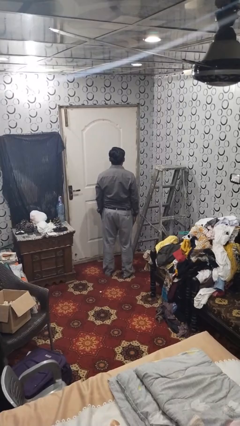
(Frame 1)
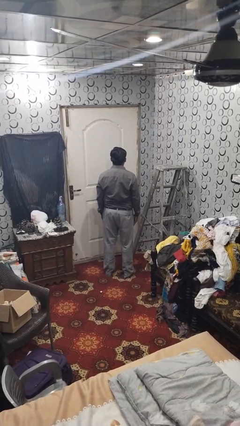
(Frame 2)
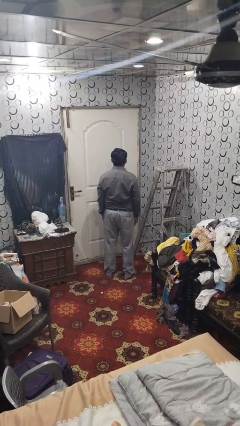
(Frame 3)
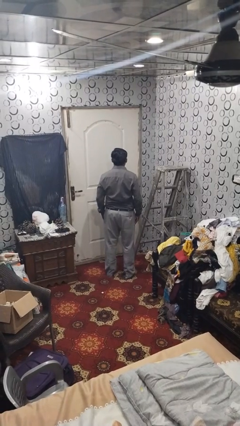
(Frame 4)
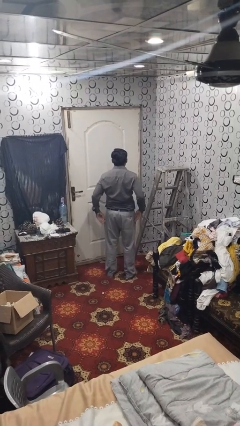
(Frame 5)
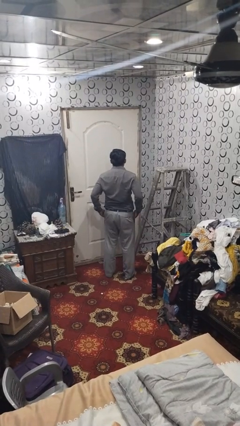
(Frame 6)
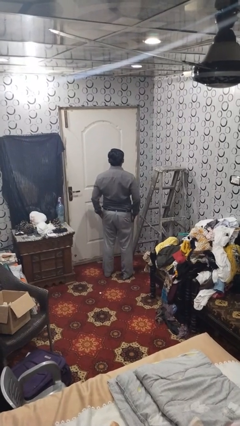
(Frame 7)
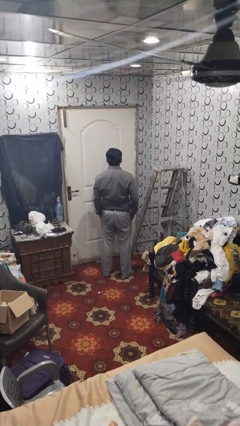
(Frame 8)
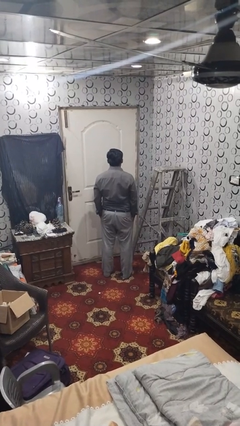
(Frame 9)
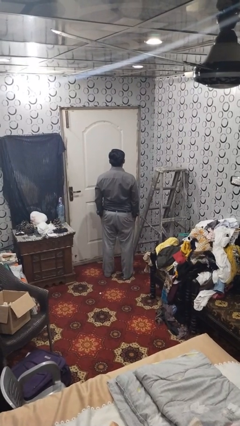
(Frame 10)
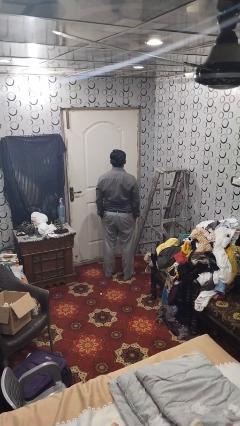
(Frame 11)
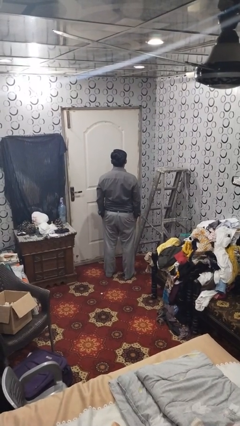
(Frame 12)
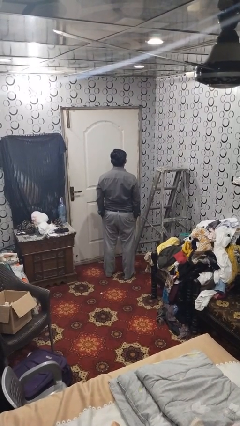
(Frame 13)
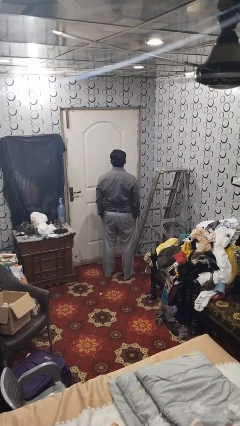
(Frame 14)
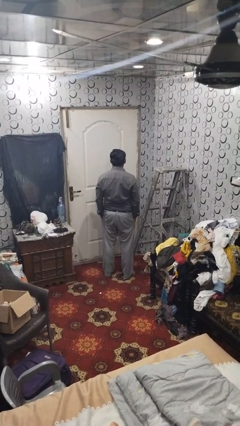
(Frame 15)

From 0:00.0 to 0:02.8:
person puts hands in back pockets

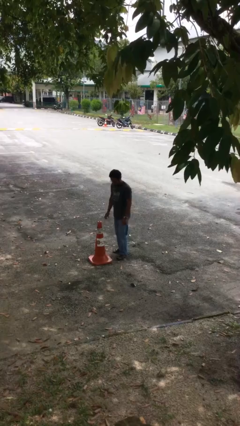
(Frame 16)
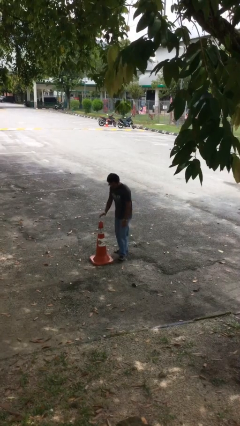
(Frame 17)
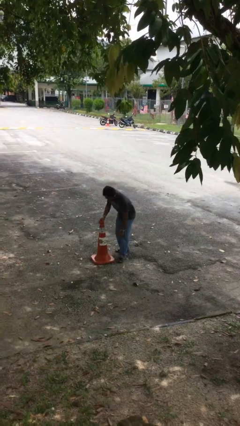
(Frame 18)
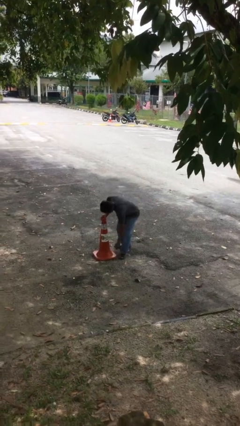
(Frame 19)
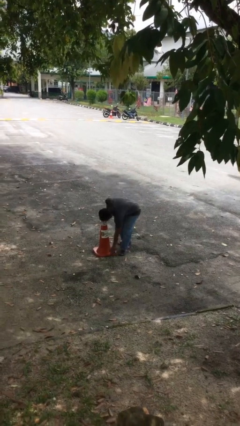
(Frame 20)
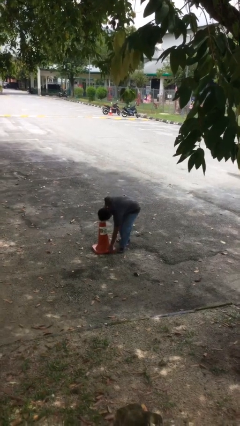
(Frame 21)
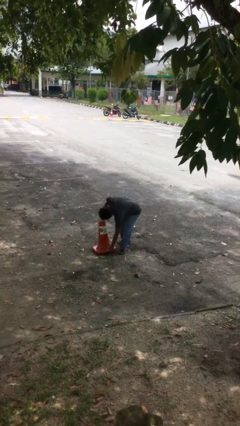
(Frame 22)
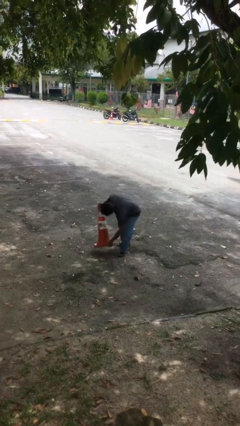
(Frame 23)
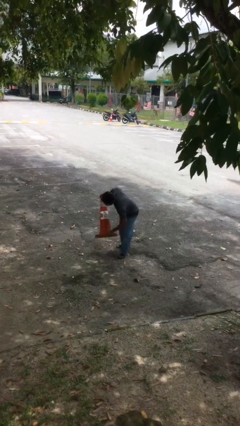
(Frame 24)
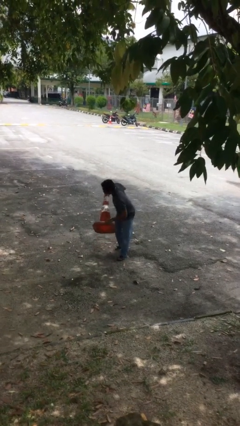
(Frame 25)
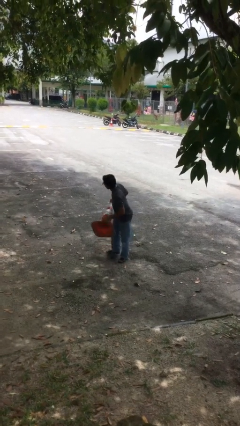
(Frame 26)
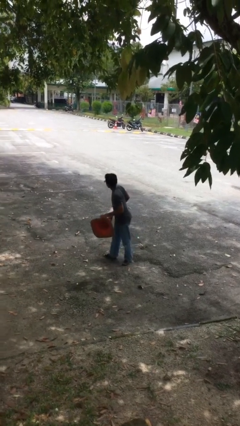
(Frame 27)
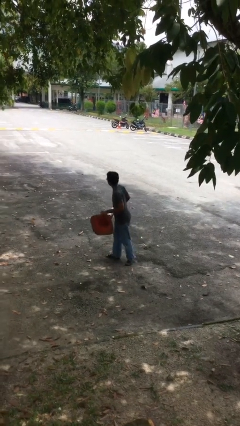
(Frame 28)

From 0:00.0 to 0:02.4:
person picks up object from floor

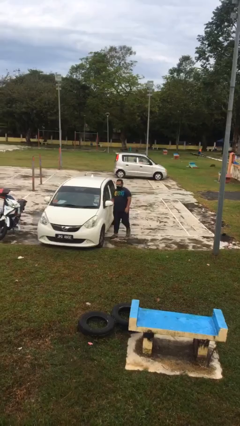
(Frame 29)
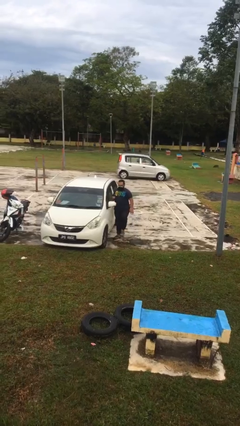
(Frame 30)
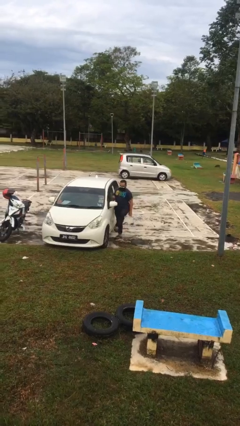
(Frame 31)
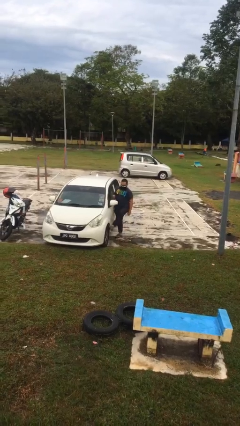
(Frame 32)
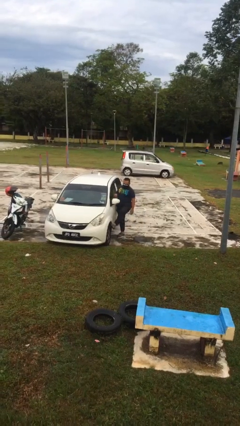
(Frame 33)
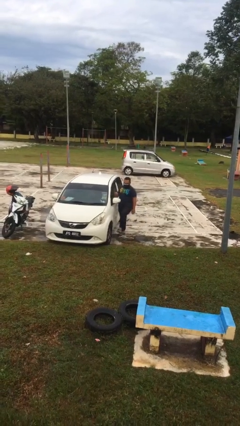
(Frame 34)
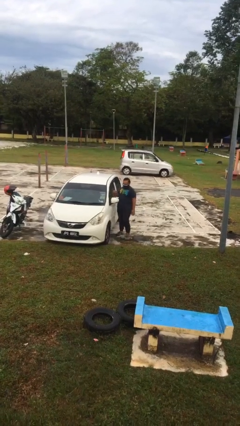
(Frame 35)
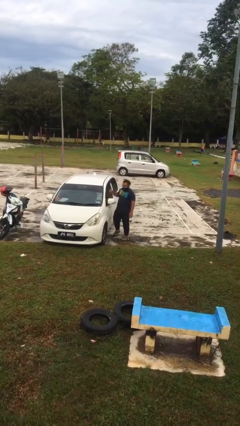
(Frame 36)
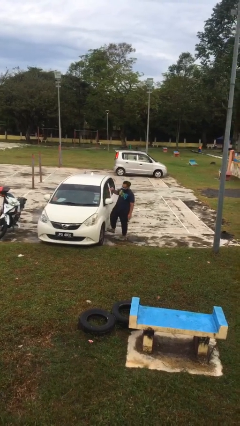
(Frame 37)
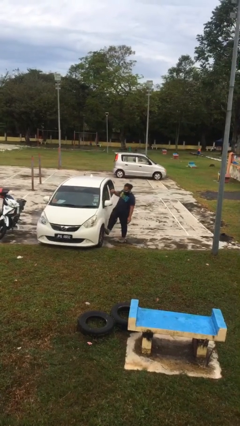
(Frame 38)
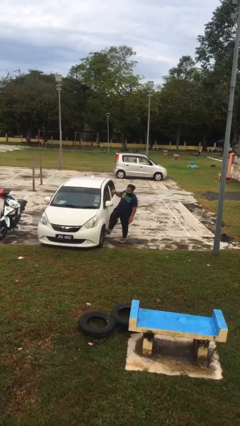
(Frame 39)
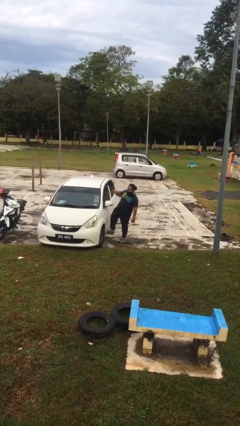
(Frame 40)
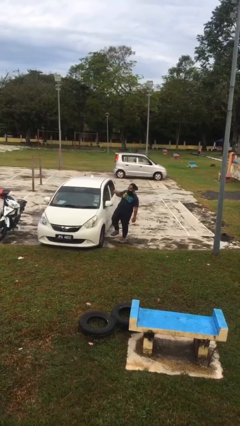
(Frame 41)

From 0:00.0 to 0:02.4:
person kicks car tires

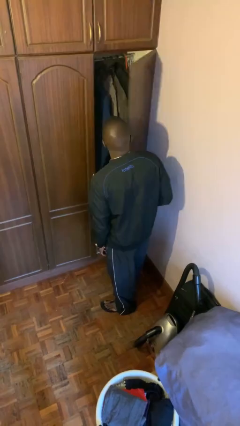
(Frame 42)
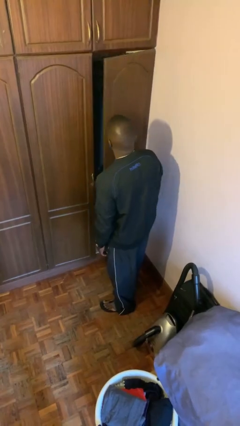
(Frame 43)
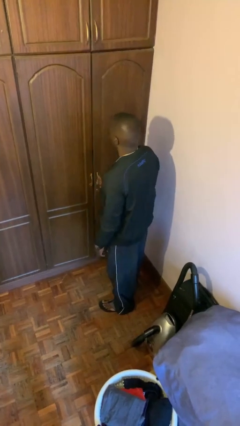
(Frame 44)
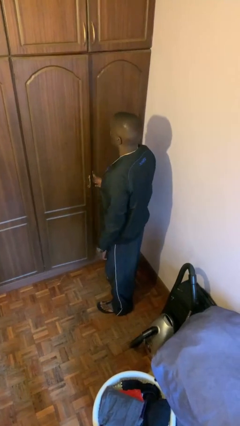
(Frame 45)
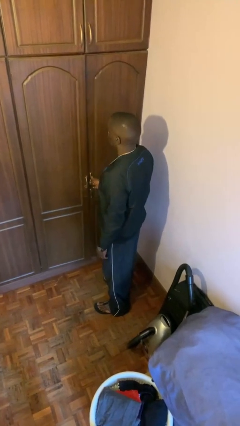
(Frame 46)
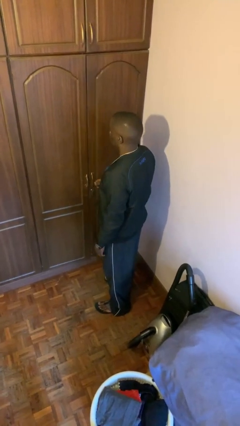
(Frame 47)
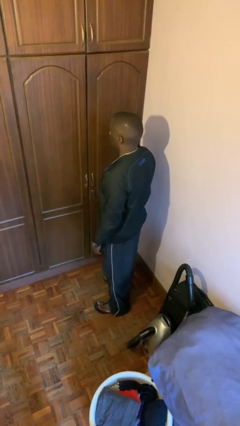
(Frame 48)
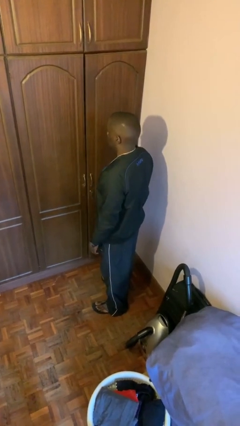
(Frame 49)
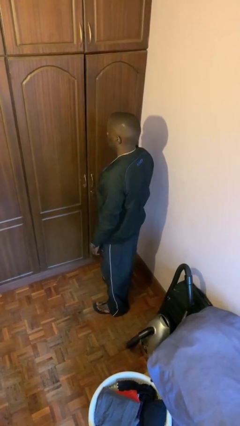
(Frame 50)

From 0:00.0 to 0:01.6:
person closes closet door

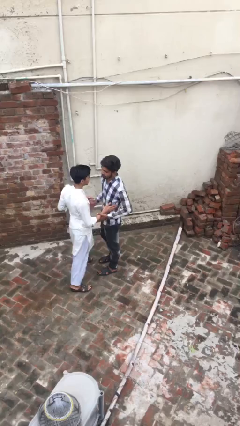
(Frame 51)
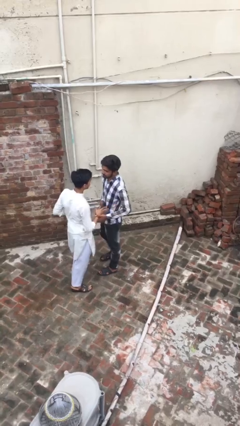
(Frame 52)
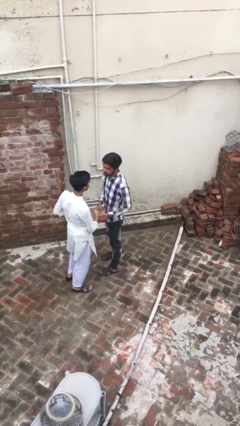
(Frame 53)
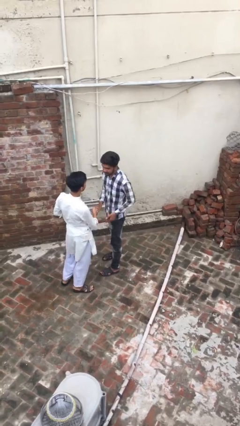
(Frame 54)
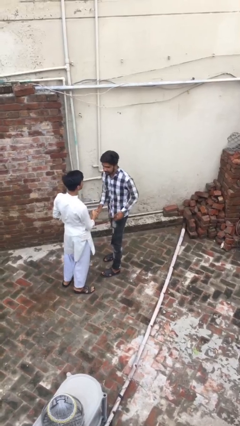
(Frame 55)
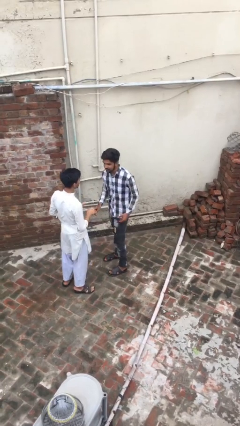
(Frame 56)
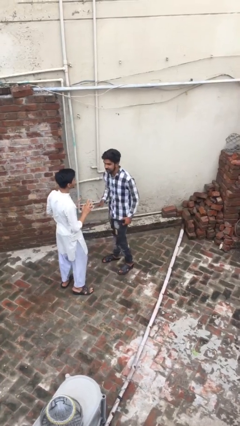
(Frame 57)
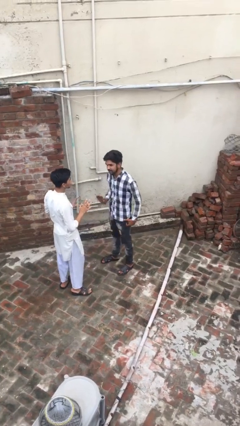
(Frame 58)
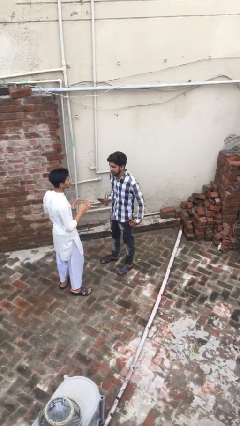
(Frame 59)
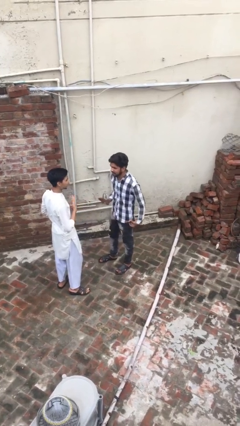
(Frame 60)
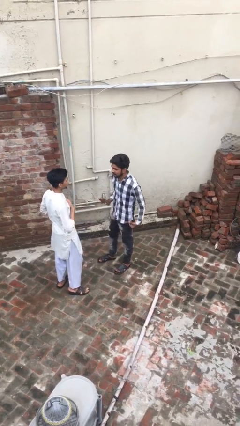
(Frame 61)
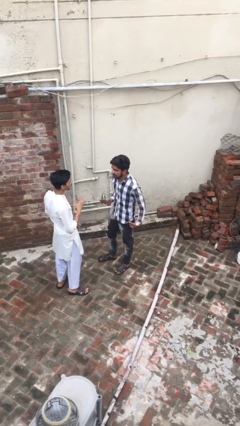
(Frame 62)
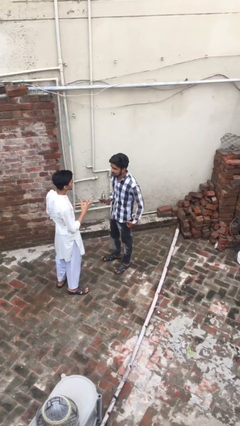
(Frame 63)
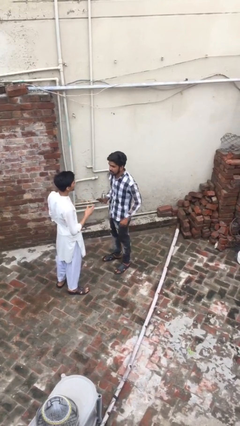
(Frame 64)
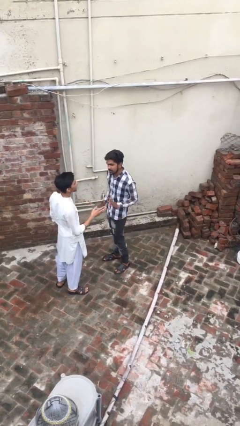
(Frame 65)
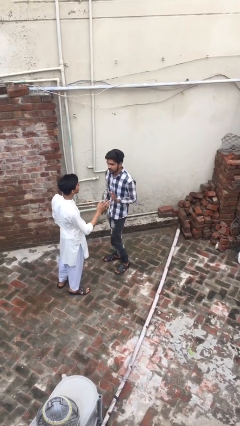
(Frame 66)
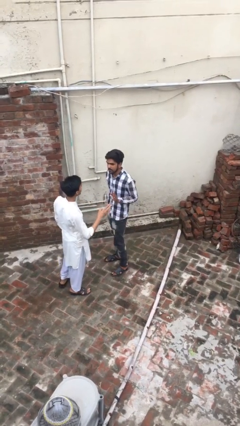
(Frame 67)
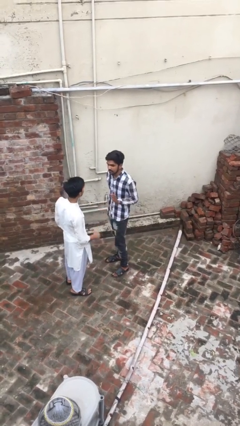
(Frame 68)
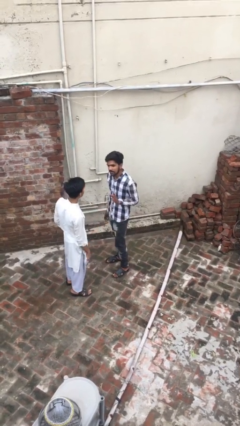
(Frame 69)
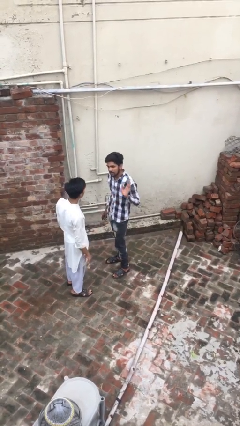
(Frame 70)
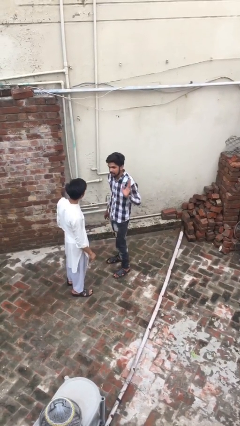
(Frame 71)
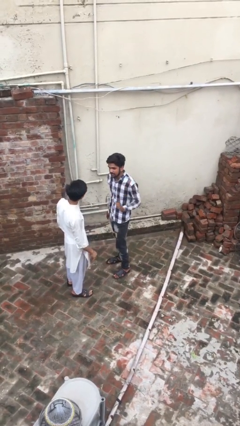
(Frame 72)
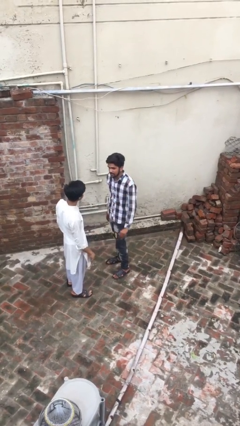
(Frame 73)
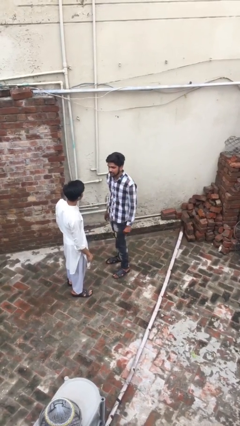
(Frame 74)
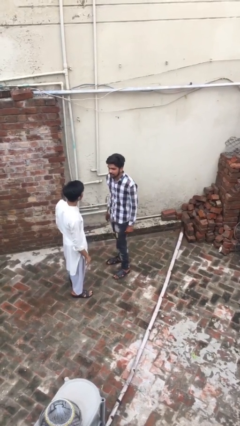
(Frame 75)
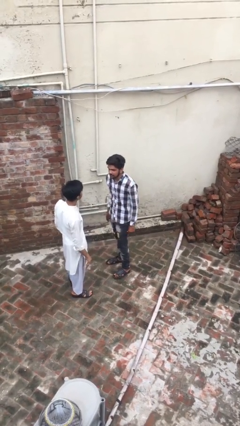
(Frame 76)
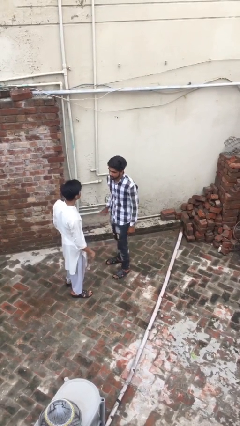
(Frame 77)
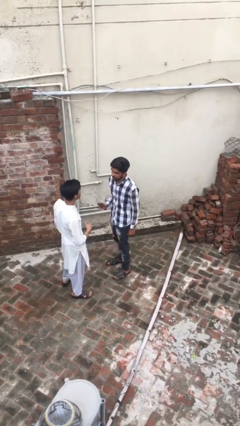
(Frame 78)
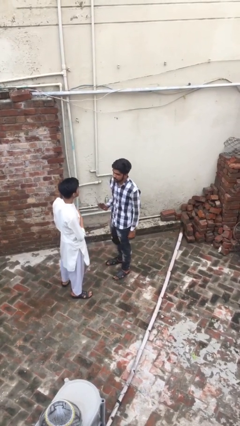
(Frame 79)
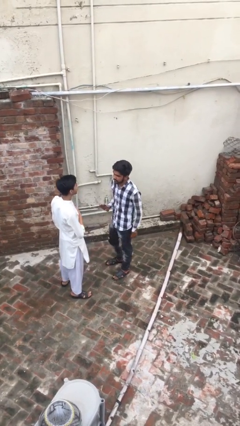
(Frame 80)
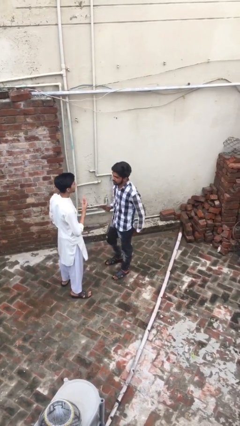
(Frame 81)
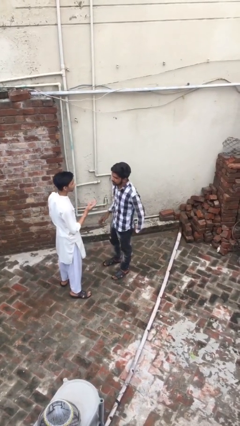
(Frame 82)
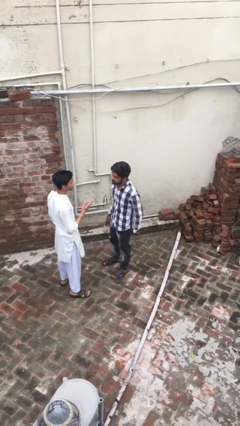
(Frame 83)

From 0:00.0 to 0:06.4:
person talks to person

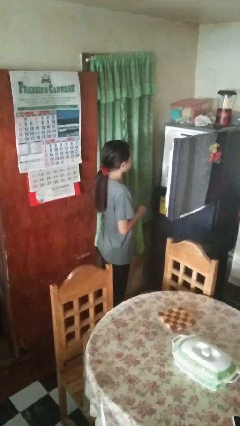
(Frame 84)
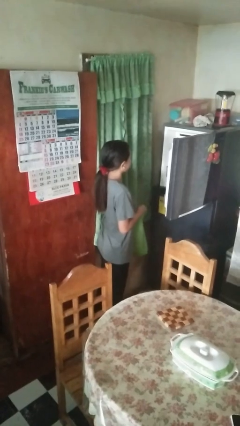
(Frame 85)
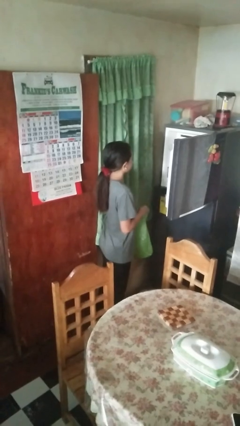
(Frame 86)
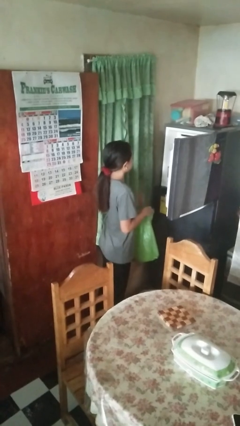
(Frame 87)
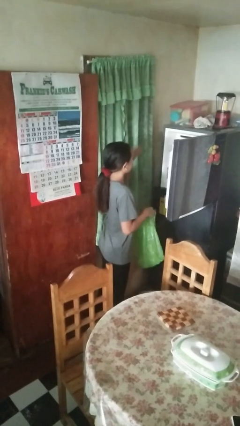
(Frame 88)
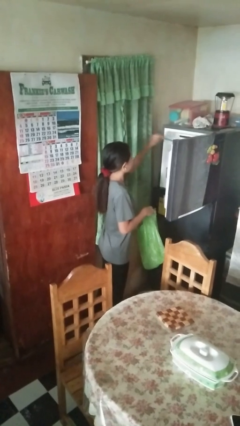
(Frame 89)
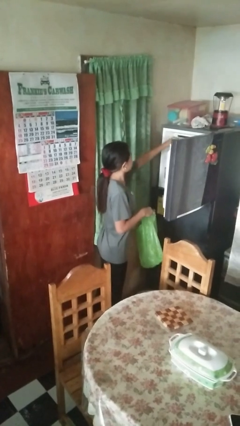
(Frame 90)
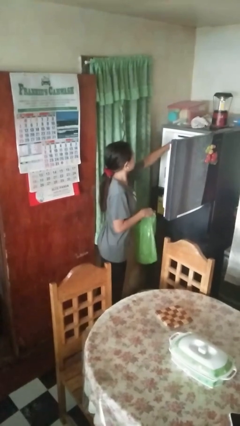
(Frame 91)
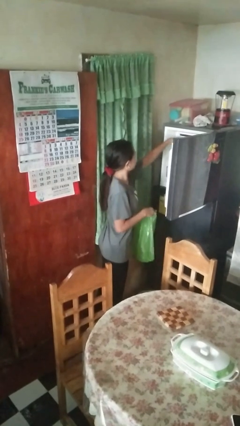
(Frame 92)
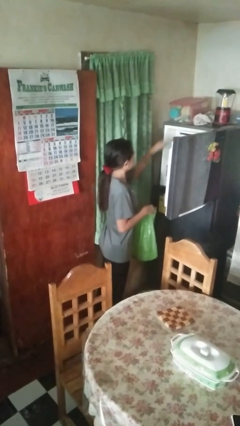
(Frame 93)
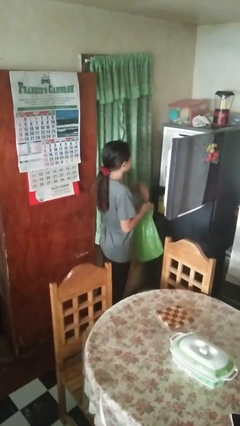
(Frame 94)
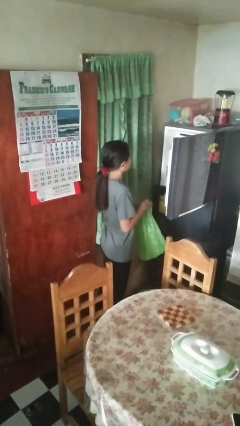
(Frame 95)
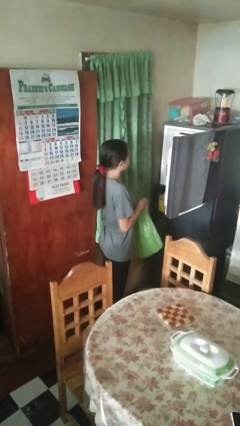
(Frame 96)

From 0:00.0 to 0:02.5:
person loads groceries into refrigerator
